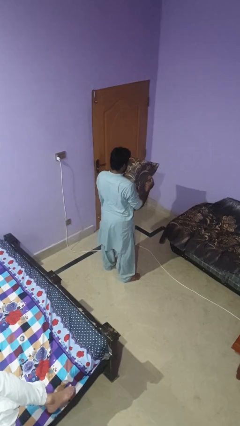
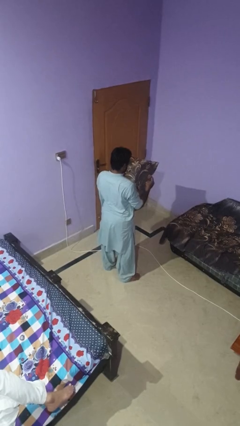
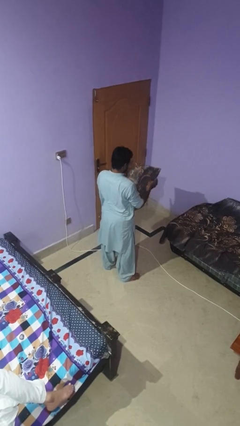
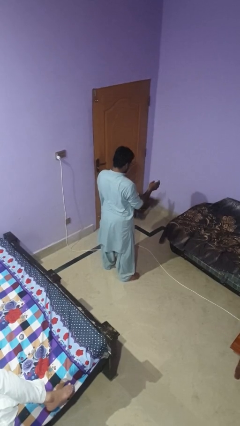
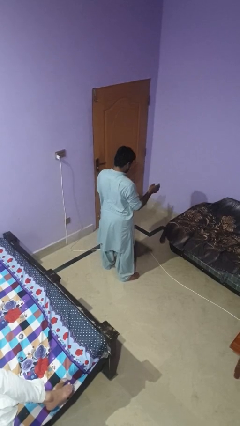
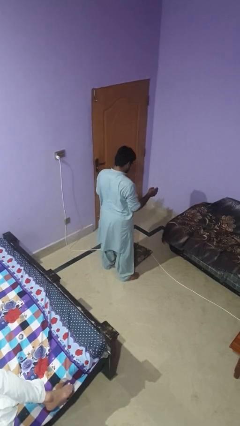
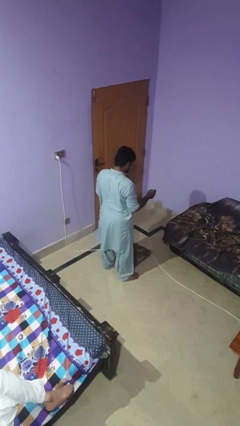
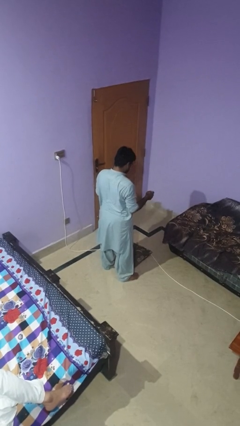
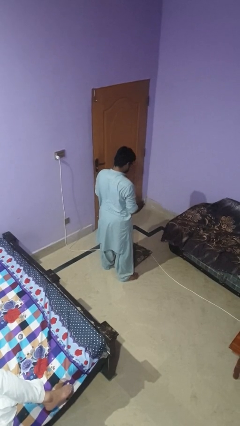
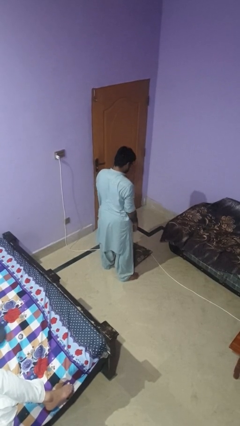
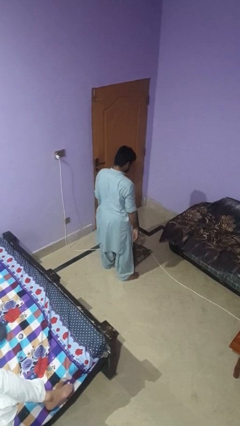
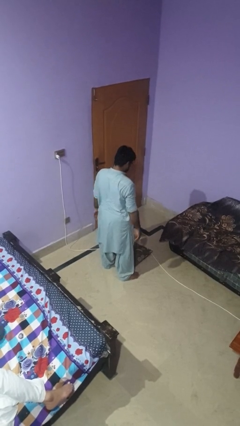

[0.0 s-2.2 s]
person drops object

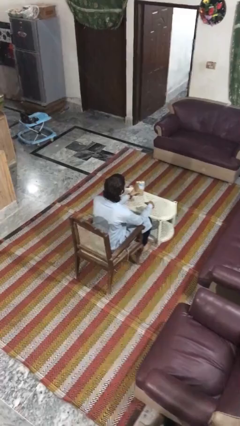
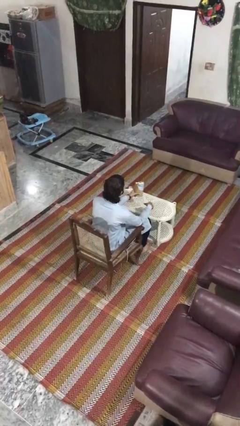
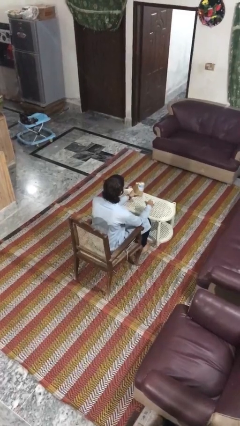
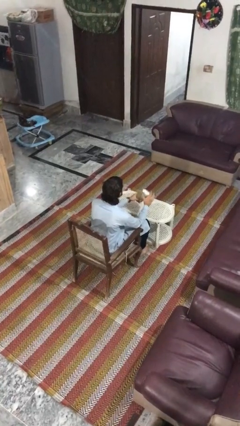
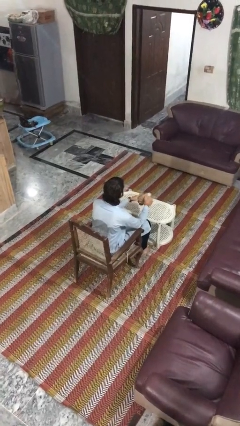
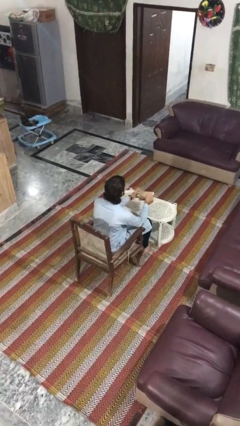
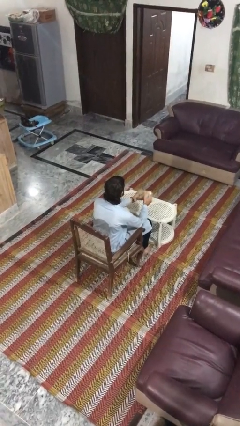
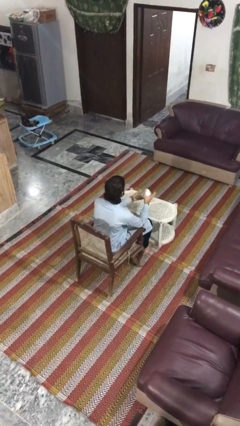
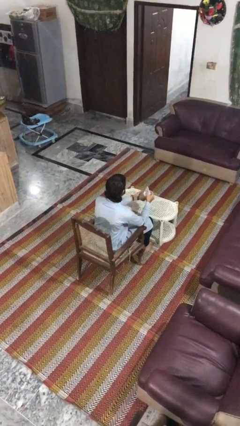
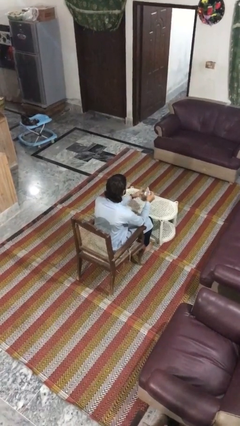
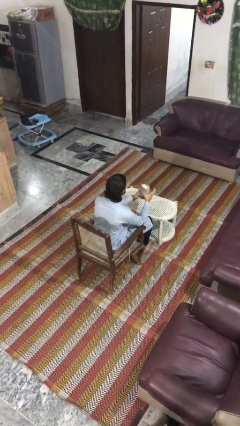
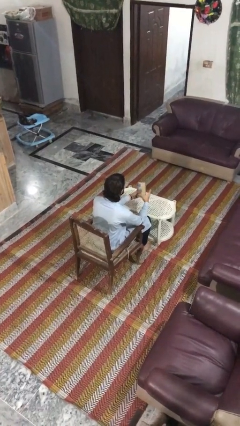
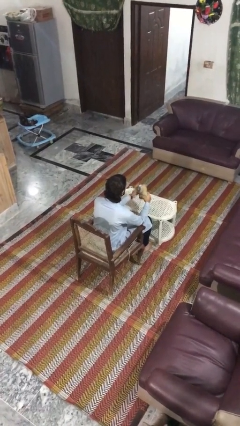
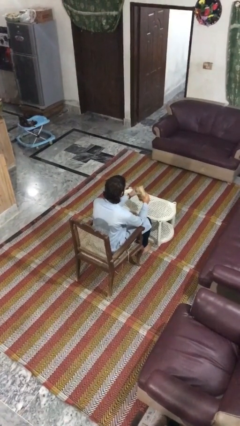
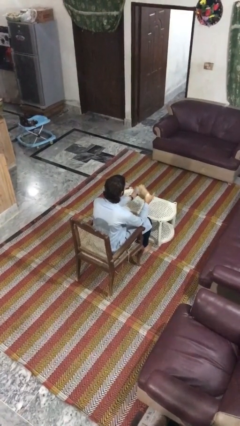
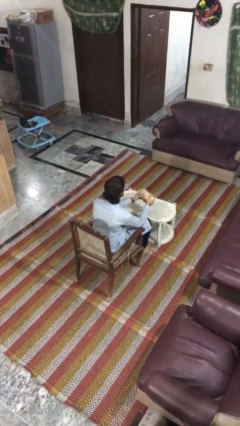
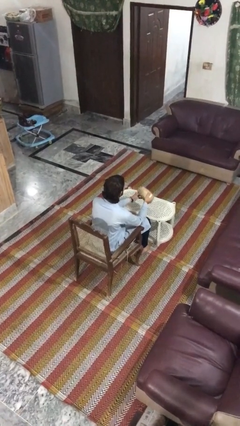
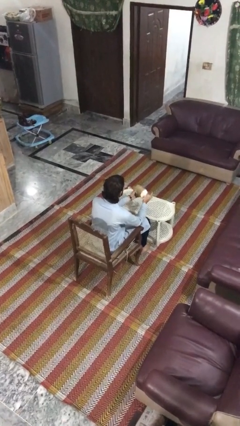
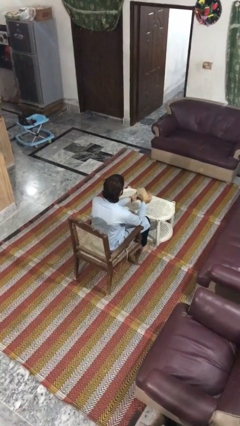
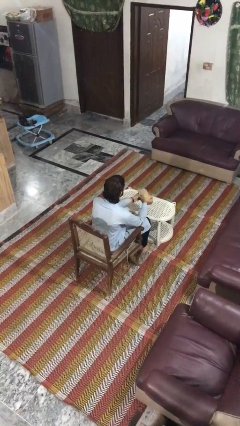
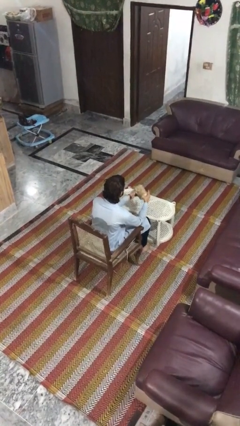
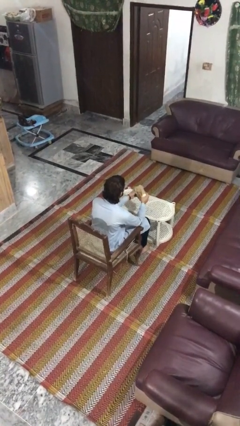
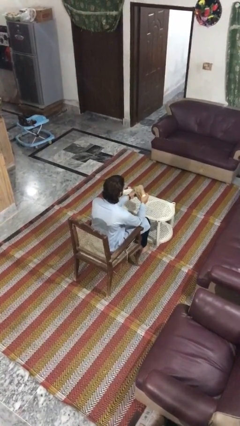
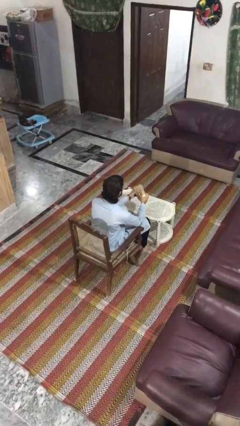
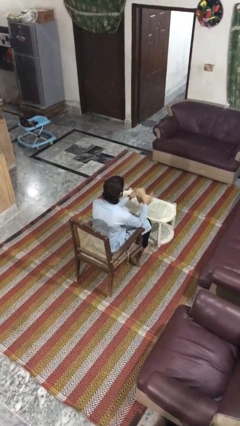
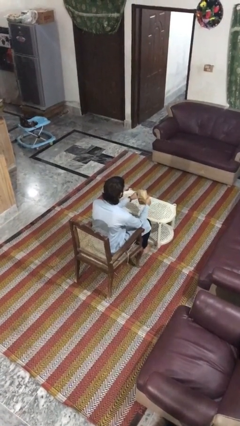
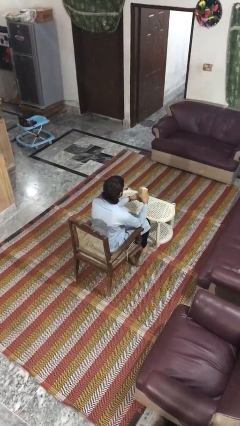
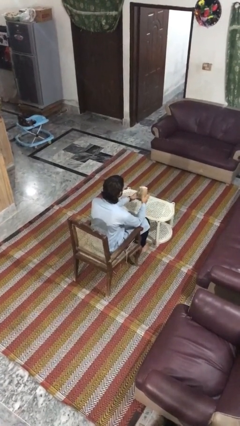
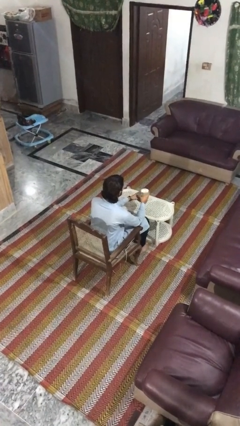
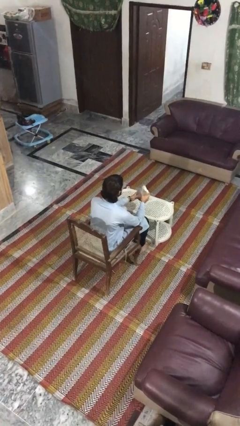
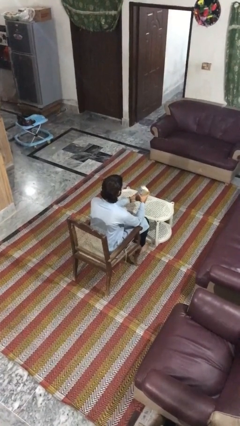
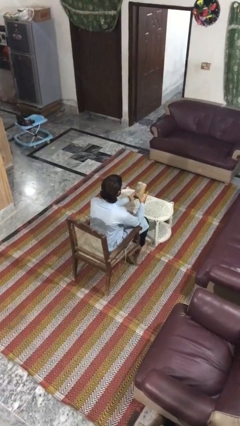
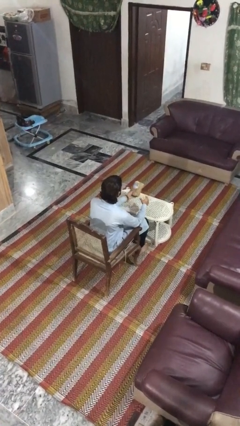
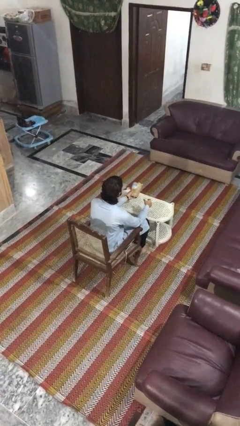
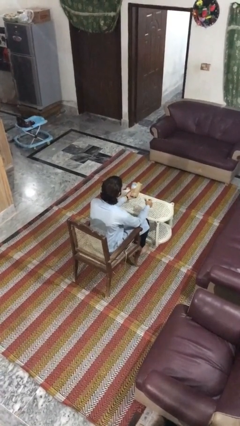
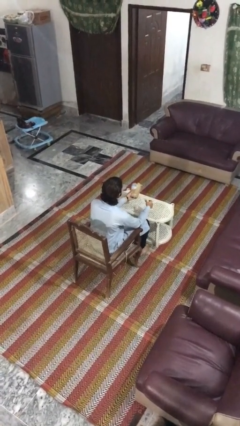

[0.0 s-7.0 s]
person squeezes object

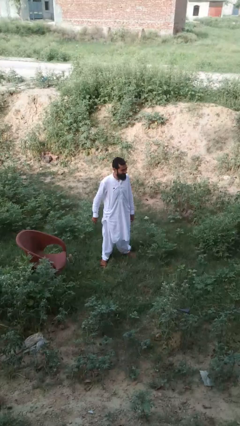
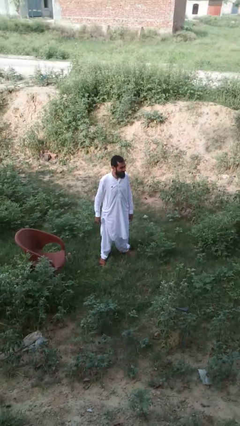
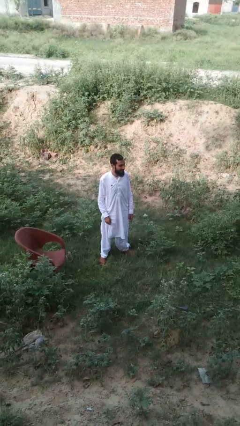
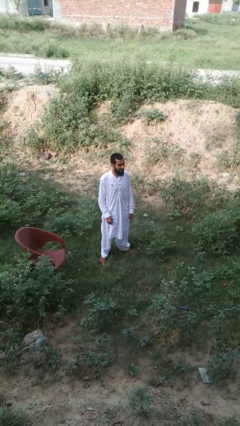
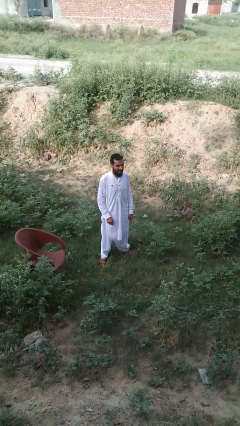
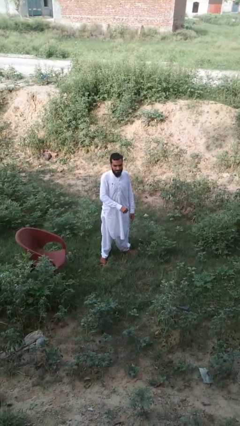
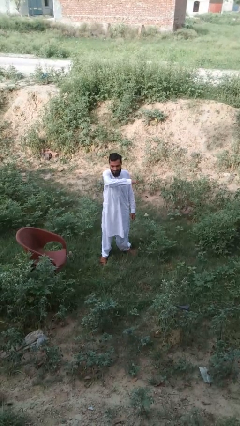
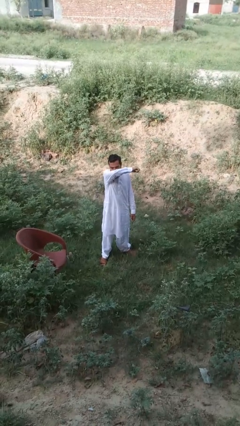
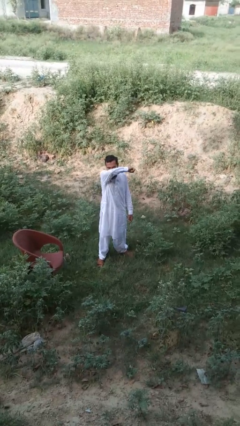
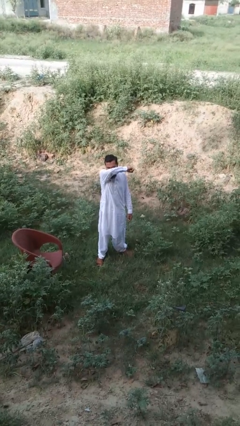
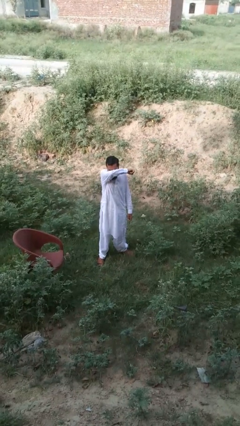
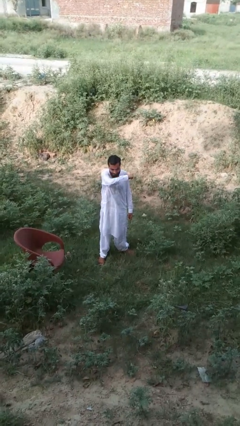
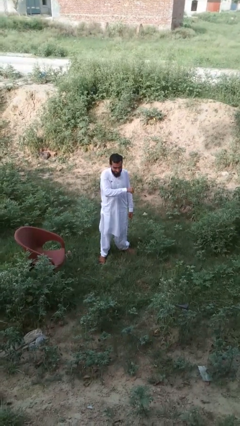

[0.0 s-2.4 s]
person sneezes into arm

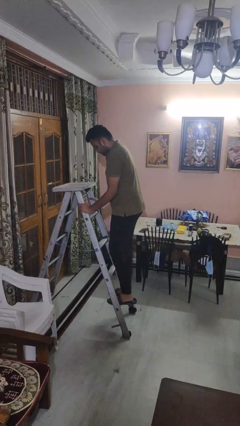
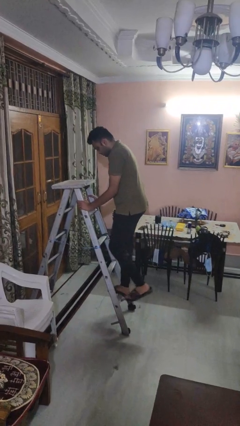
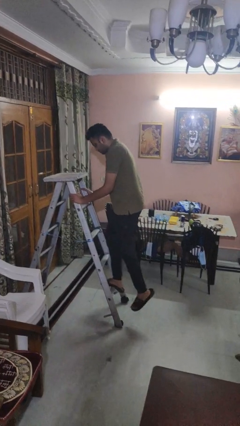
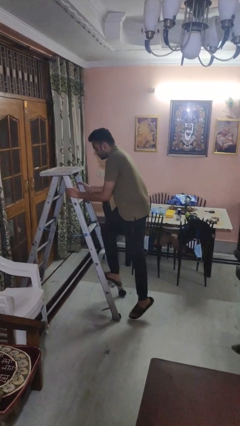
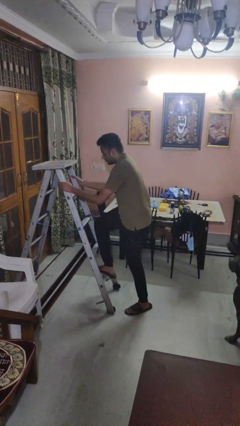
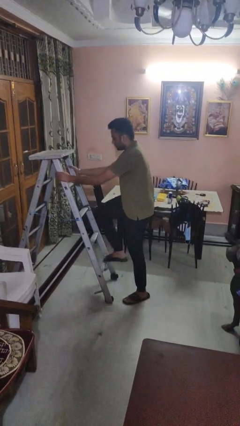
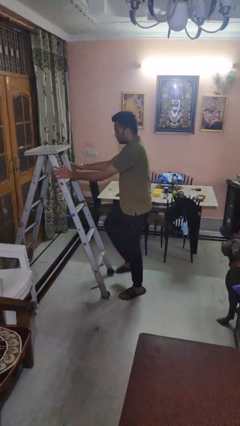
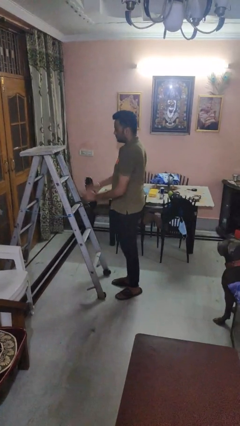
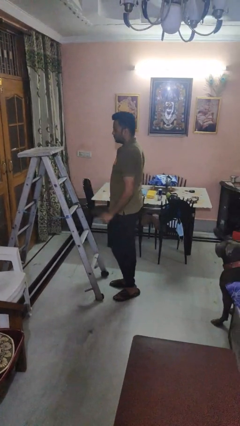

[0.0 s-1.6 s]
person climbs down ladder

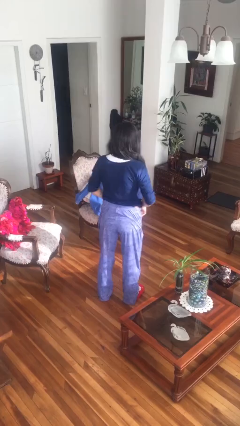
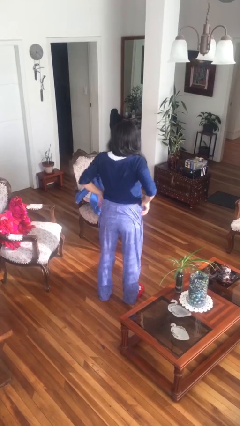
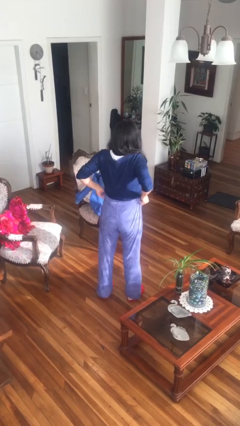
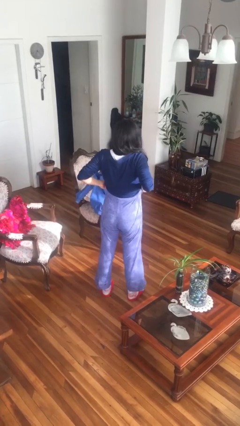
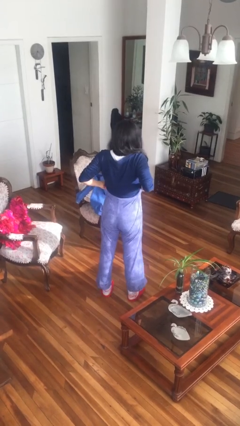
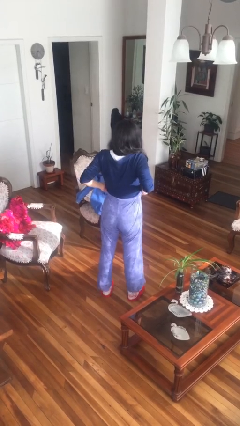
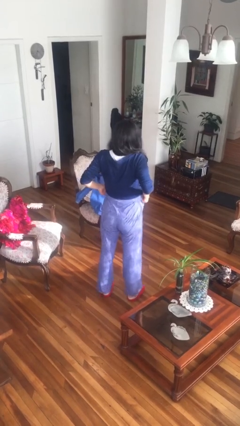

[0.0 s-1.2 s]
person hikes up pants

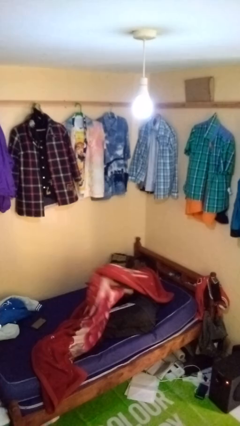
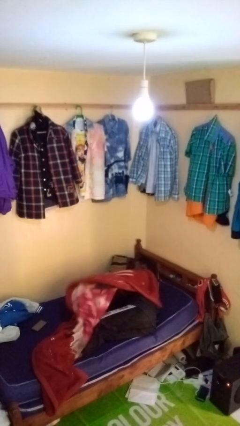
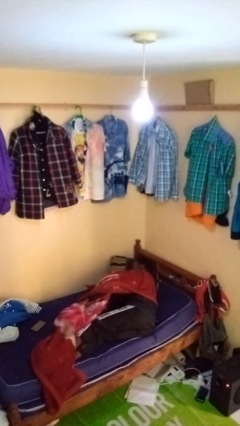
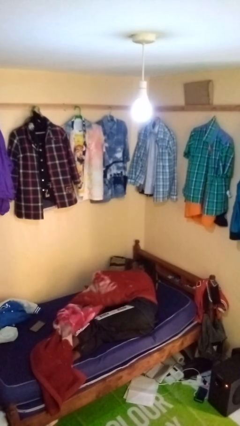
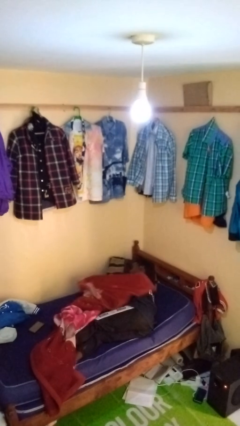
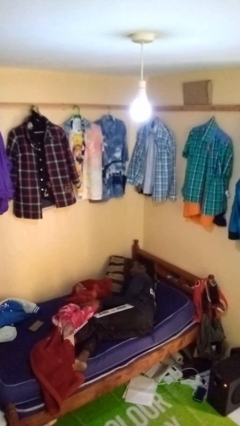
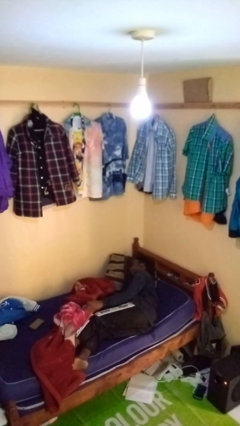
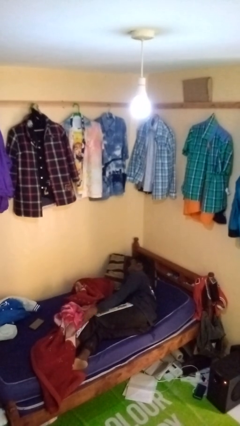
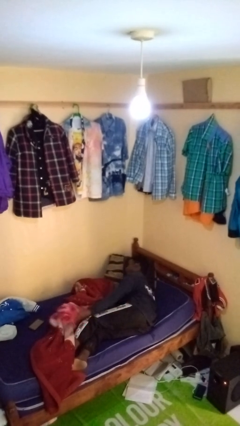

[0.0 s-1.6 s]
person uncovers with blanket

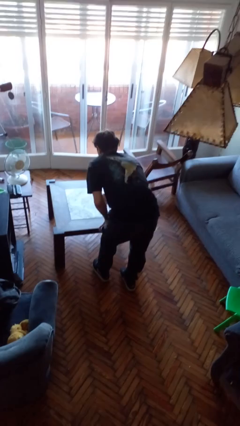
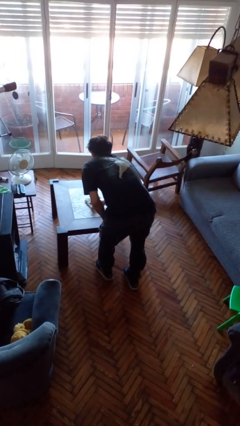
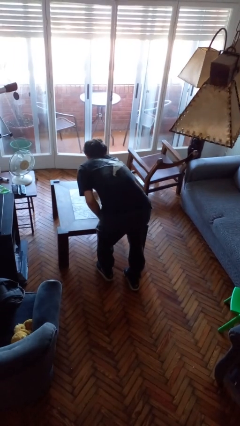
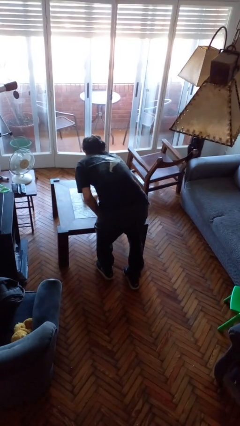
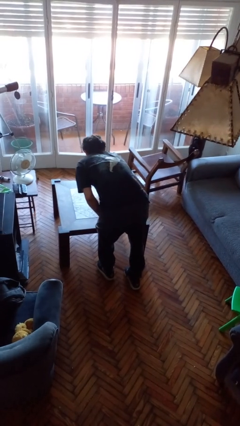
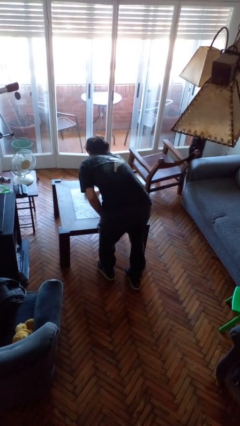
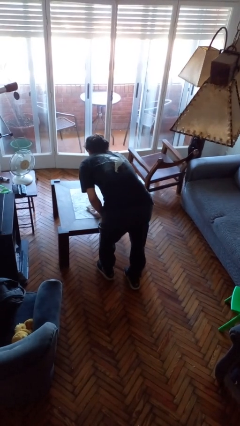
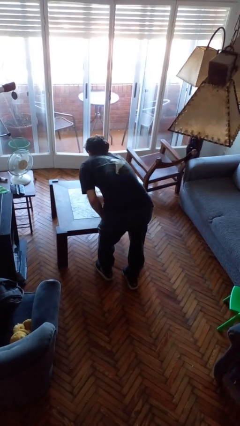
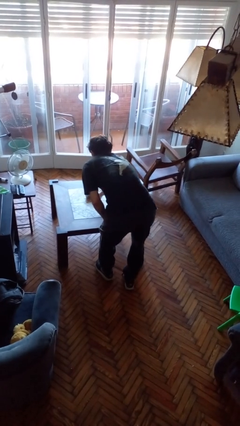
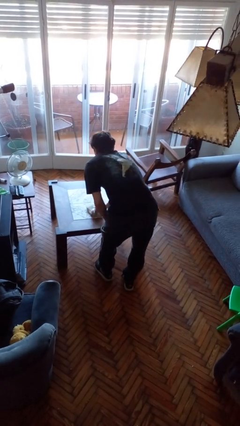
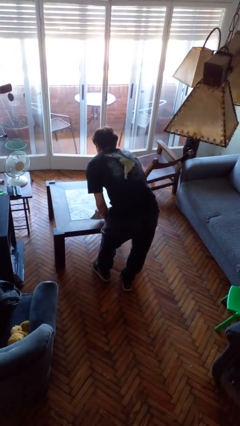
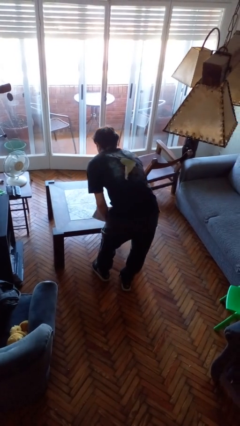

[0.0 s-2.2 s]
person cleans table with rag
